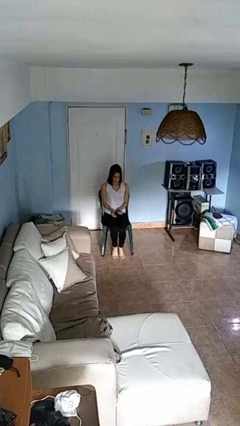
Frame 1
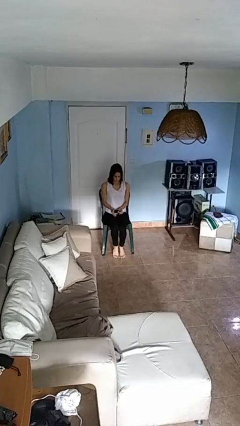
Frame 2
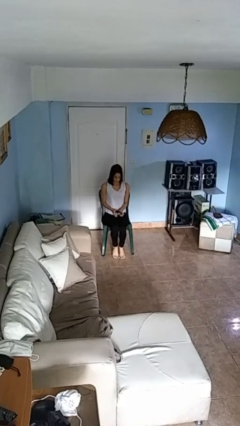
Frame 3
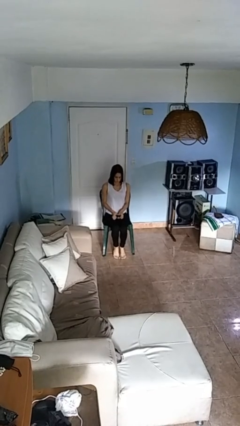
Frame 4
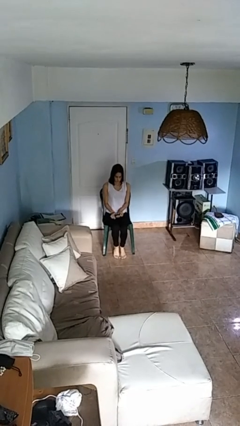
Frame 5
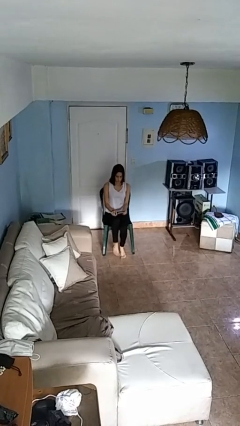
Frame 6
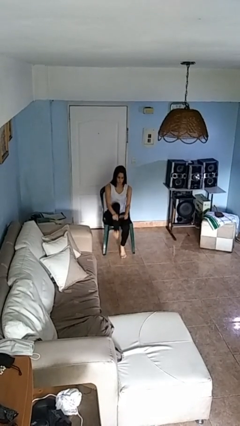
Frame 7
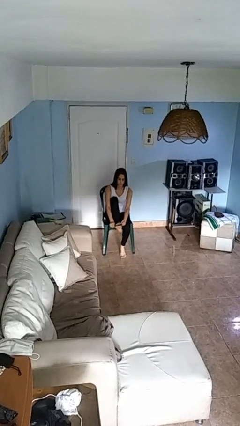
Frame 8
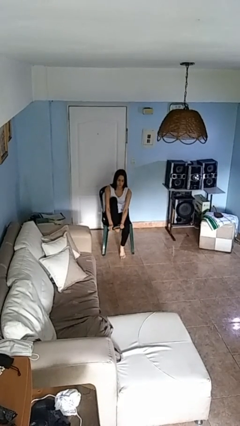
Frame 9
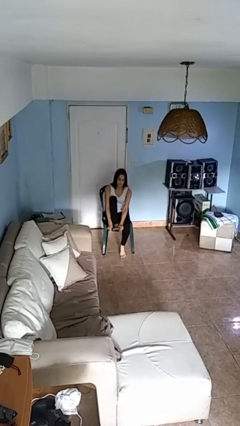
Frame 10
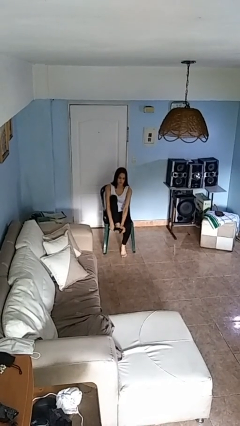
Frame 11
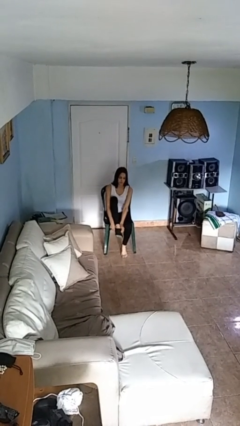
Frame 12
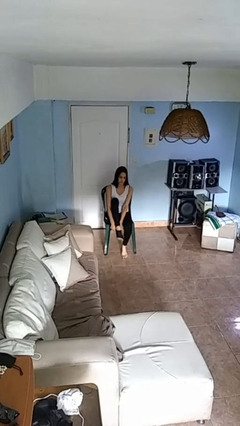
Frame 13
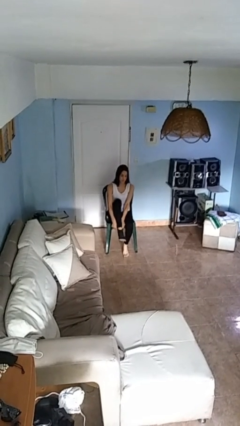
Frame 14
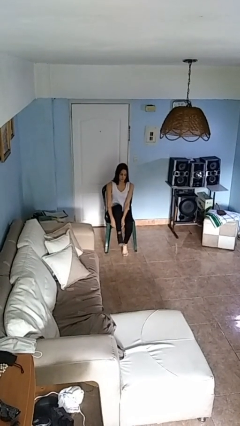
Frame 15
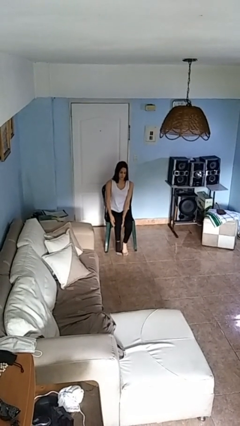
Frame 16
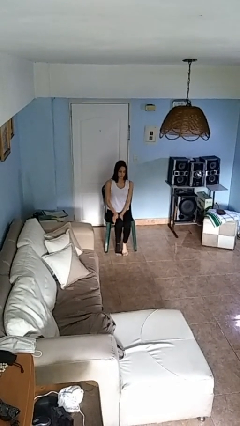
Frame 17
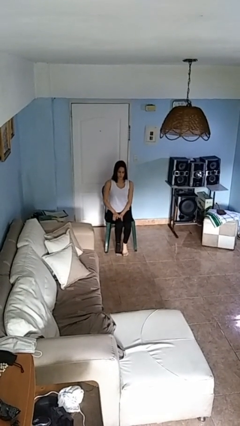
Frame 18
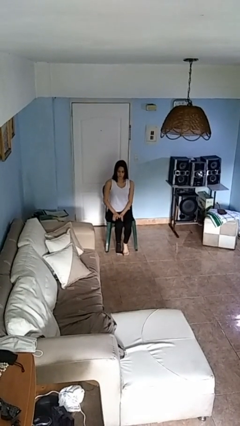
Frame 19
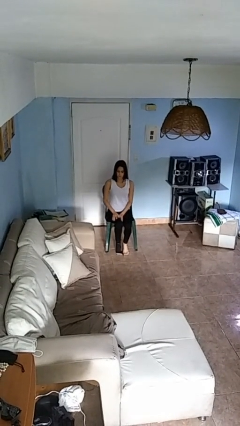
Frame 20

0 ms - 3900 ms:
person puts on socks

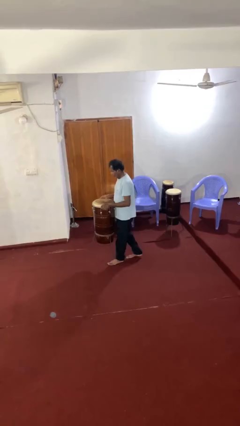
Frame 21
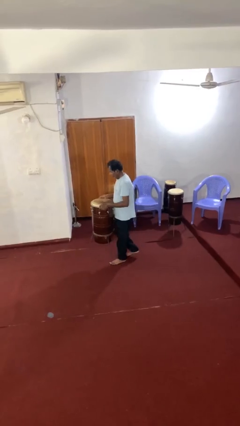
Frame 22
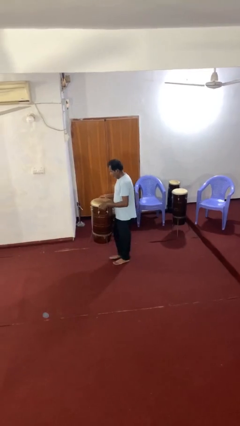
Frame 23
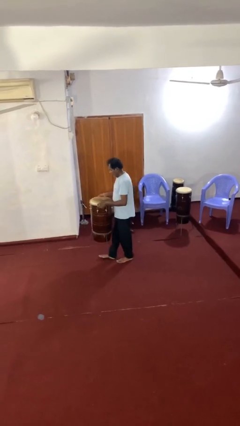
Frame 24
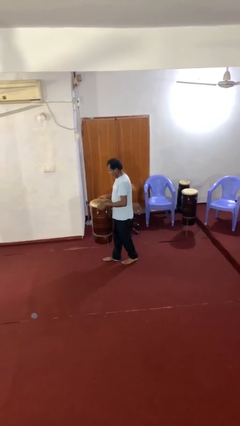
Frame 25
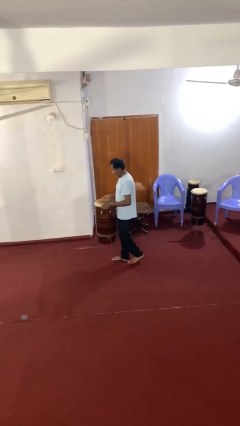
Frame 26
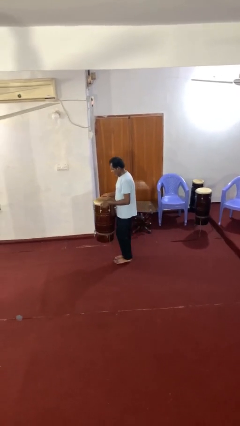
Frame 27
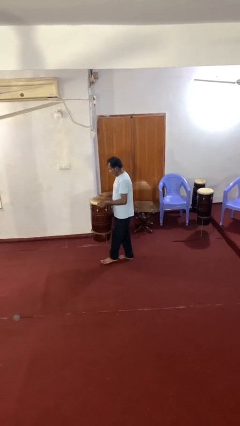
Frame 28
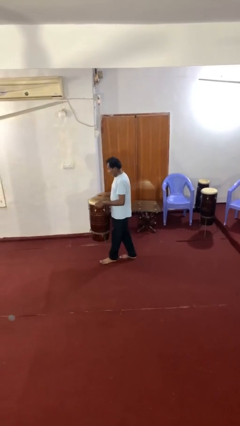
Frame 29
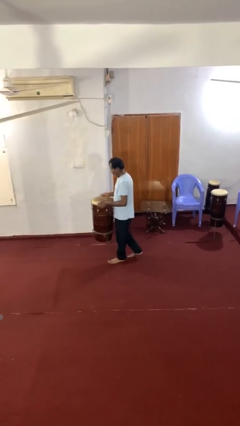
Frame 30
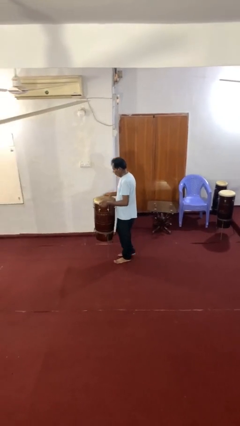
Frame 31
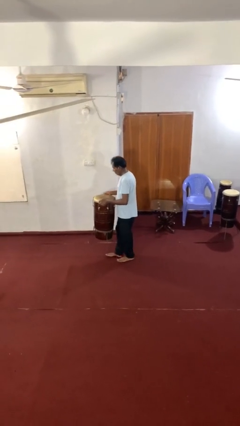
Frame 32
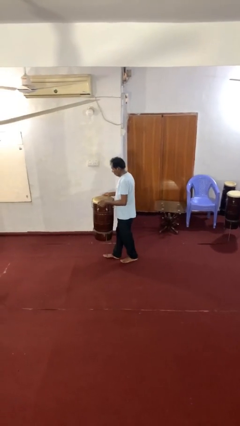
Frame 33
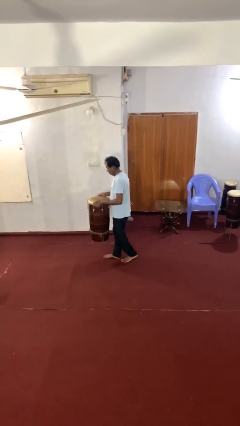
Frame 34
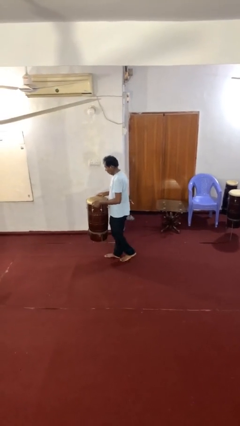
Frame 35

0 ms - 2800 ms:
person carries heavy object

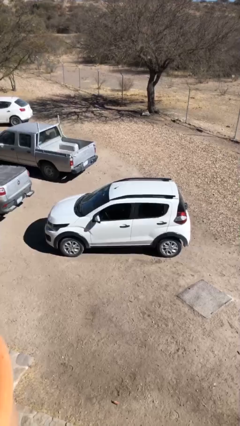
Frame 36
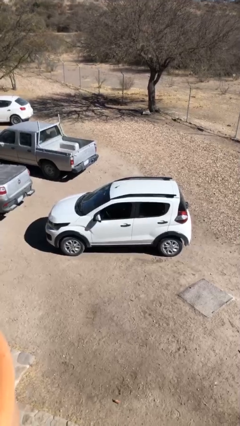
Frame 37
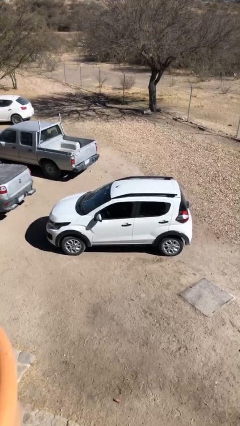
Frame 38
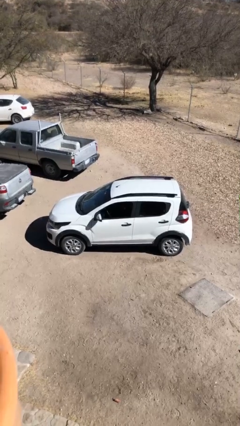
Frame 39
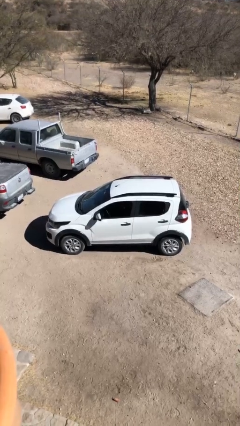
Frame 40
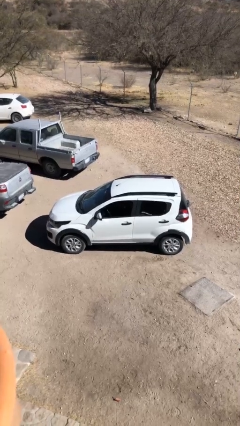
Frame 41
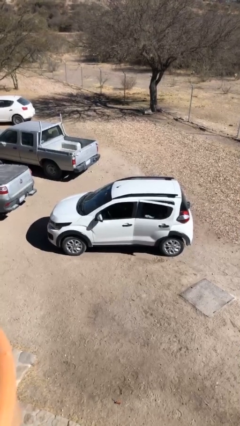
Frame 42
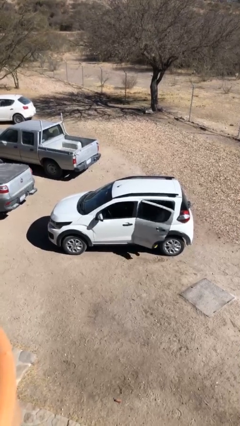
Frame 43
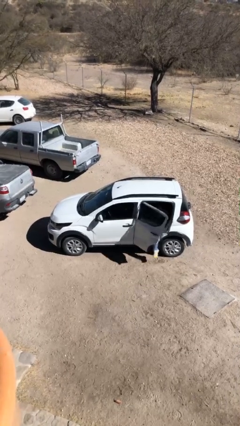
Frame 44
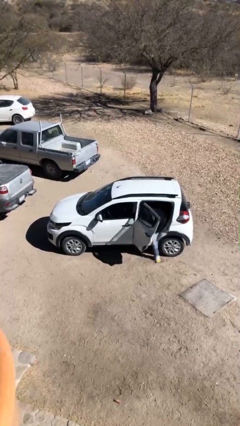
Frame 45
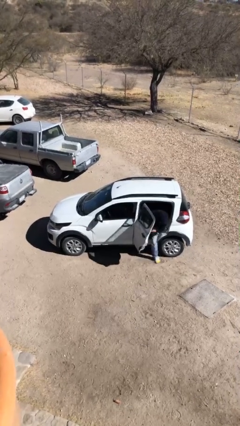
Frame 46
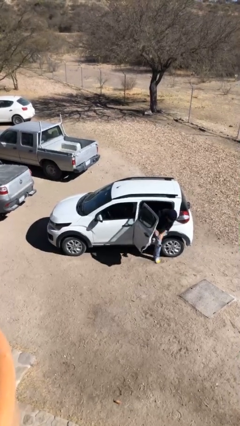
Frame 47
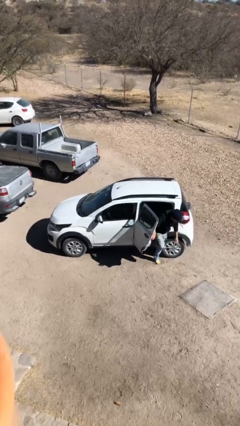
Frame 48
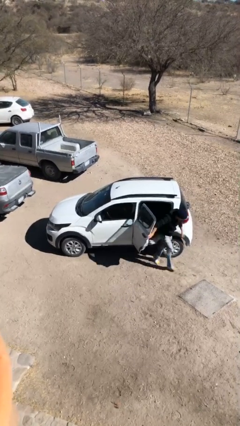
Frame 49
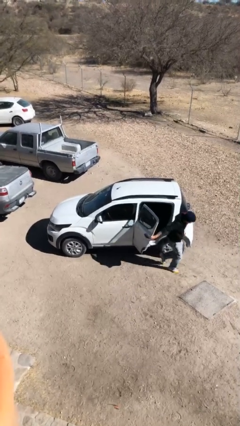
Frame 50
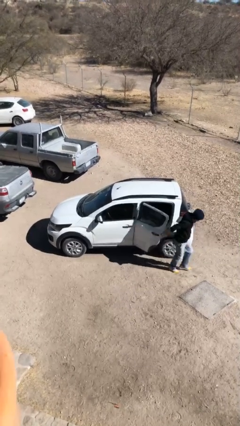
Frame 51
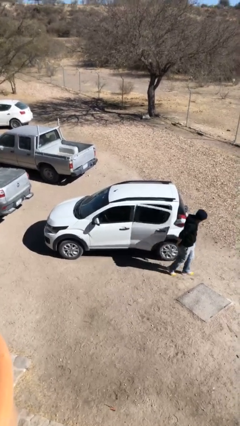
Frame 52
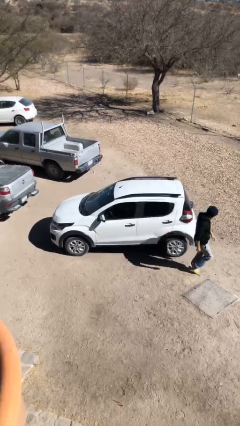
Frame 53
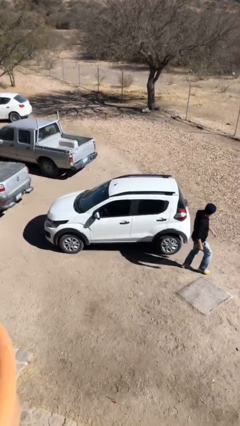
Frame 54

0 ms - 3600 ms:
car drops off person

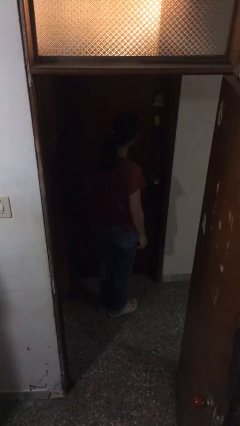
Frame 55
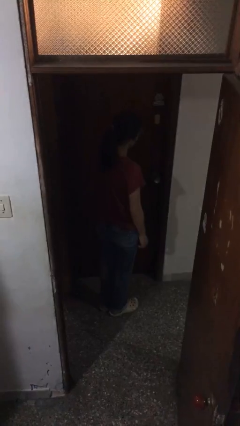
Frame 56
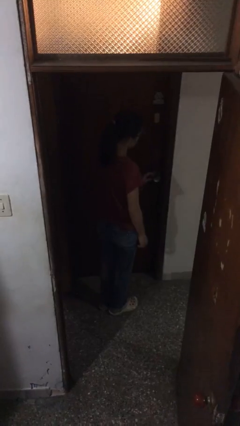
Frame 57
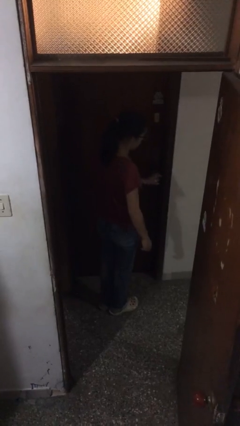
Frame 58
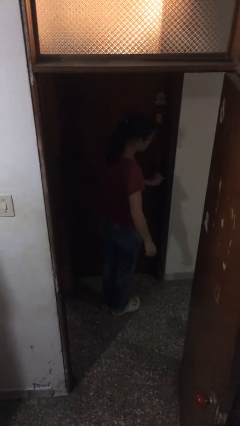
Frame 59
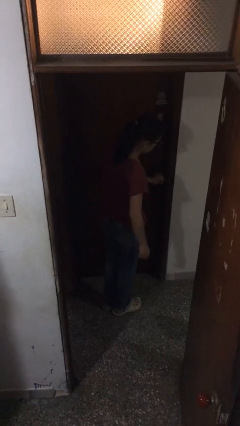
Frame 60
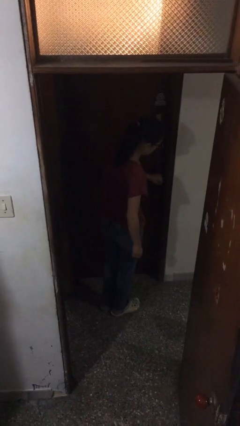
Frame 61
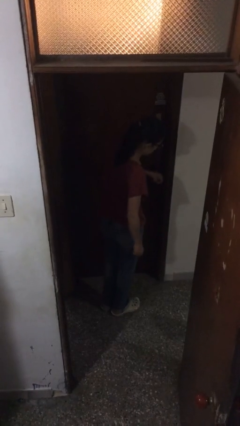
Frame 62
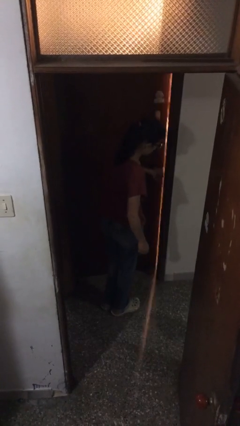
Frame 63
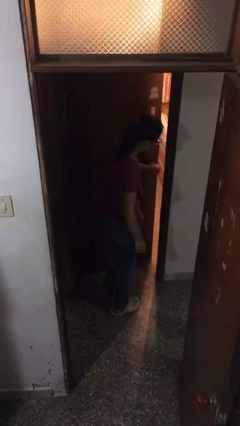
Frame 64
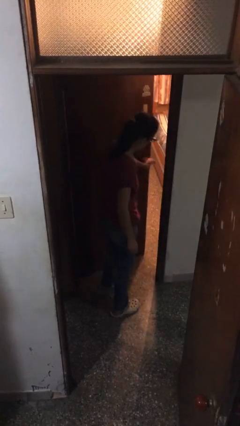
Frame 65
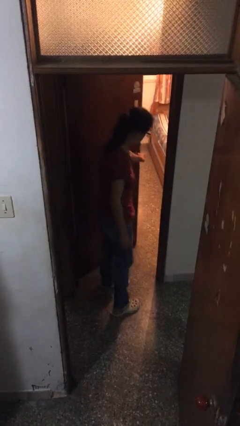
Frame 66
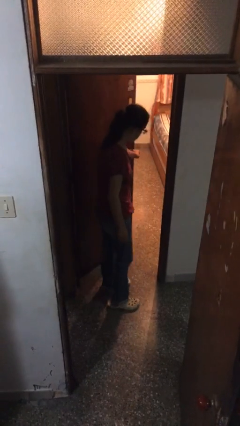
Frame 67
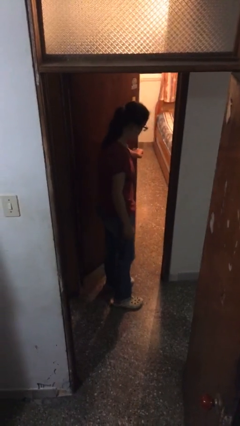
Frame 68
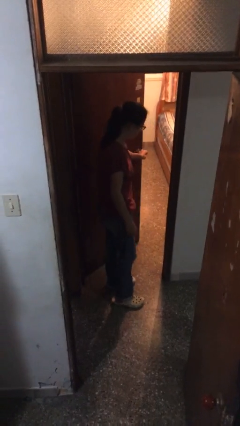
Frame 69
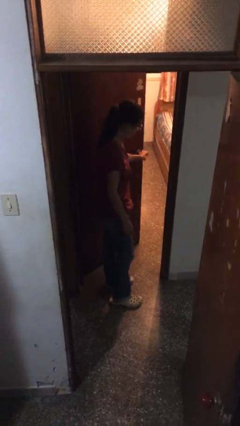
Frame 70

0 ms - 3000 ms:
person opens facility door

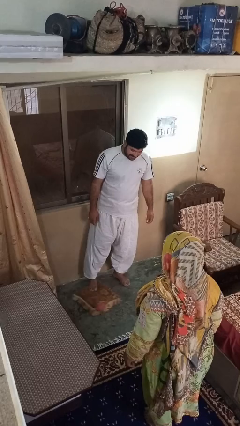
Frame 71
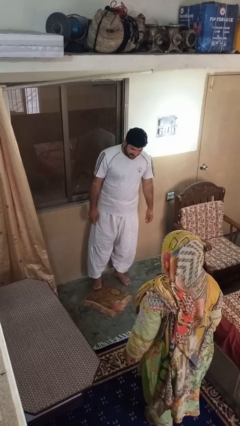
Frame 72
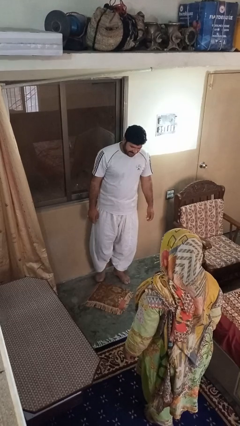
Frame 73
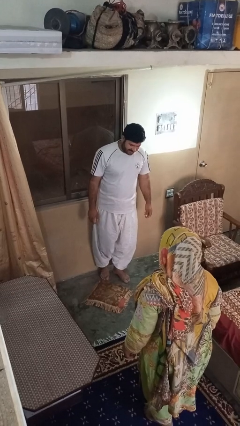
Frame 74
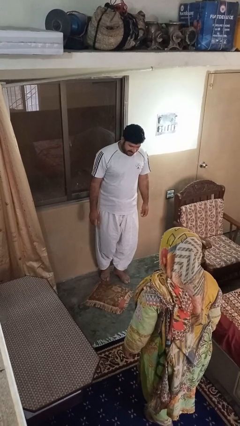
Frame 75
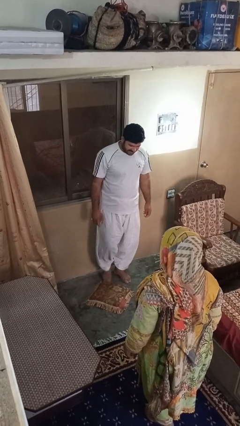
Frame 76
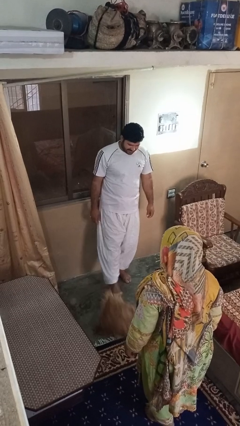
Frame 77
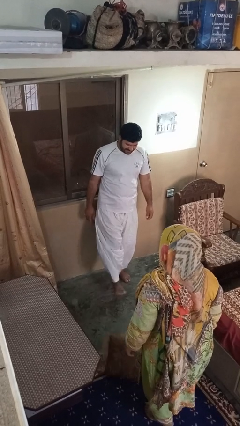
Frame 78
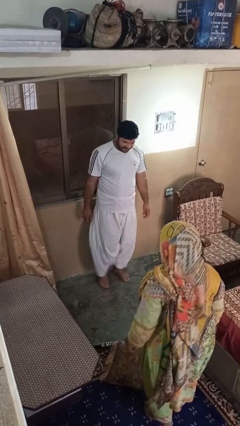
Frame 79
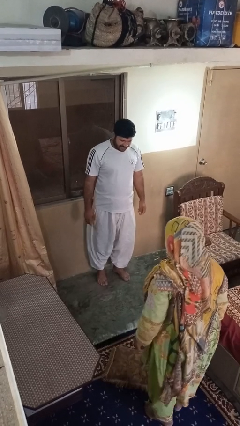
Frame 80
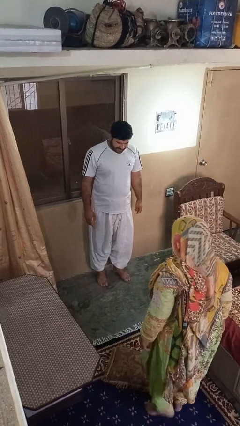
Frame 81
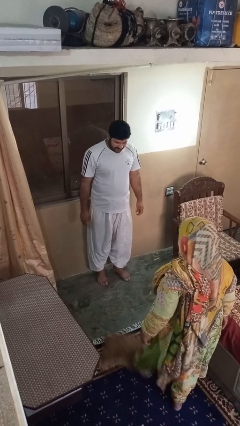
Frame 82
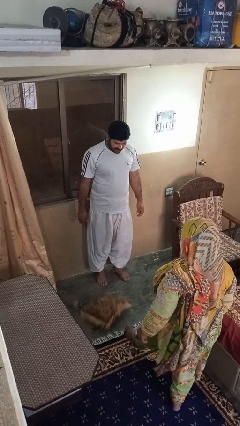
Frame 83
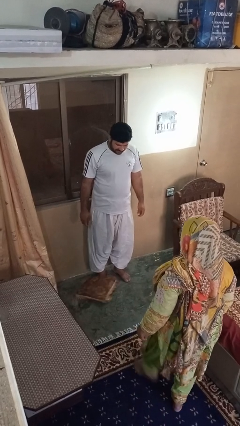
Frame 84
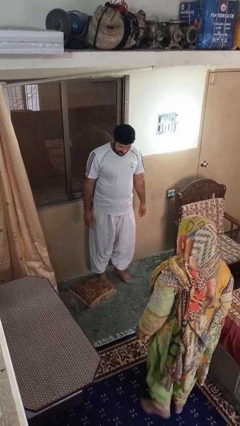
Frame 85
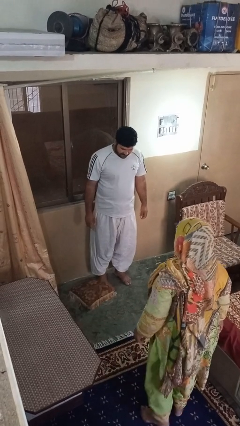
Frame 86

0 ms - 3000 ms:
person kicks object to person

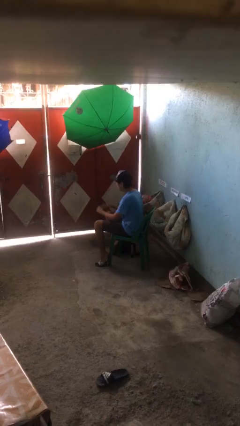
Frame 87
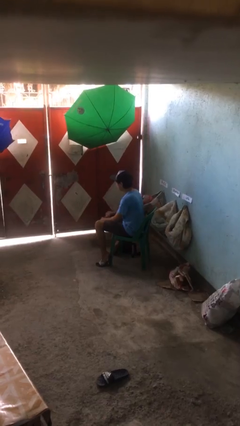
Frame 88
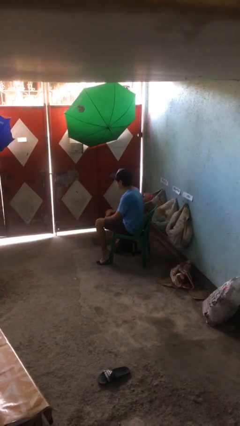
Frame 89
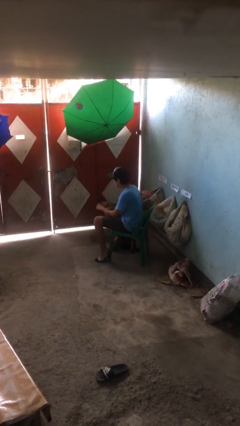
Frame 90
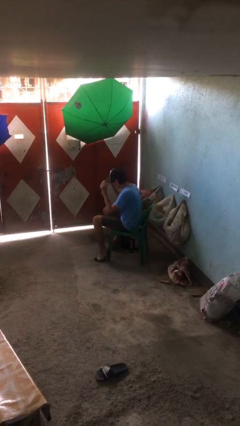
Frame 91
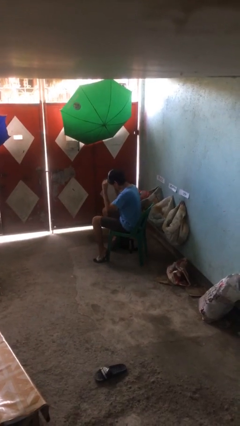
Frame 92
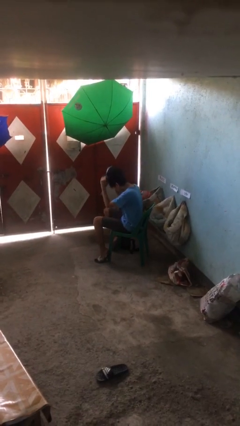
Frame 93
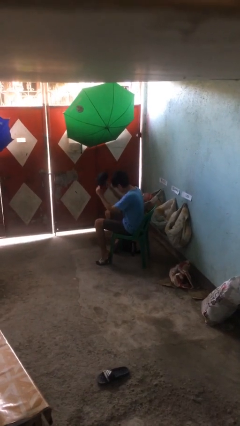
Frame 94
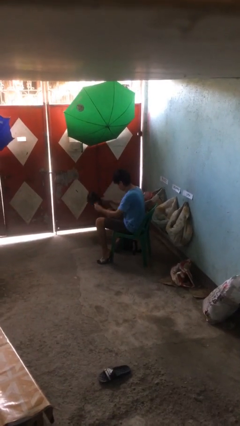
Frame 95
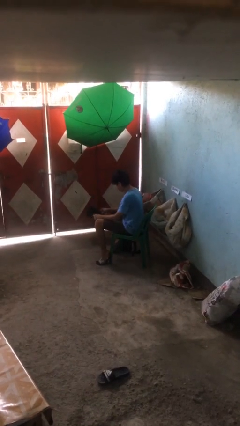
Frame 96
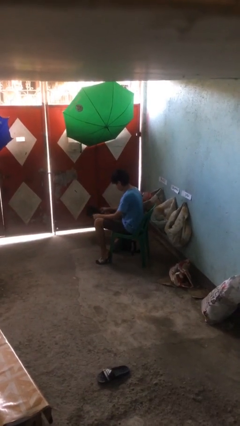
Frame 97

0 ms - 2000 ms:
person takes off hat
